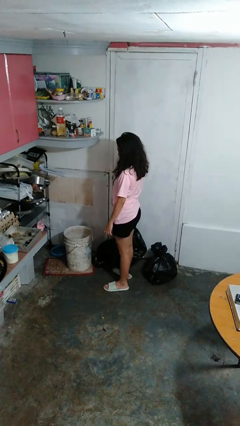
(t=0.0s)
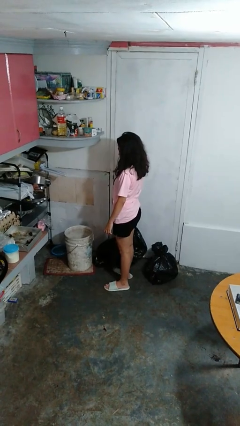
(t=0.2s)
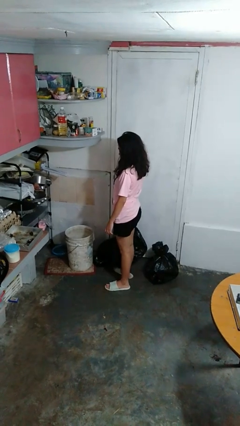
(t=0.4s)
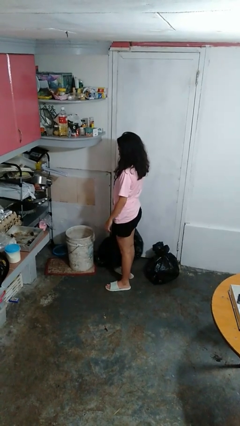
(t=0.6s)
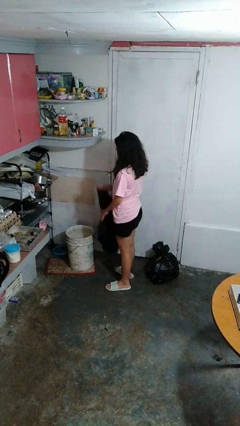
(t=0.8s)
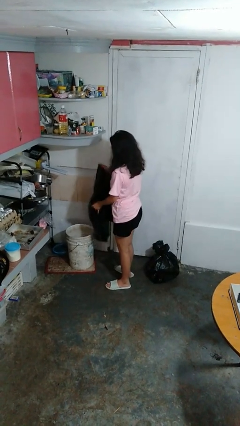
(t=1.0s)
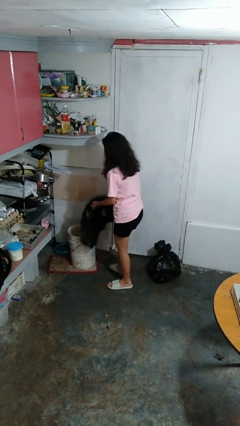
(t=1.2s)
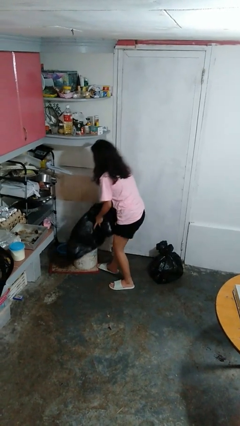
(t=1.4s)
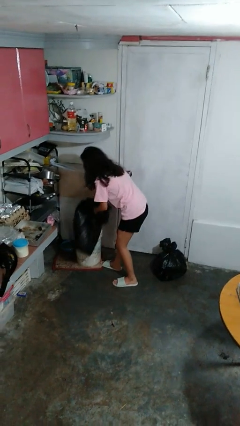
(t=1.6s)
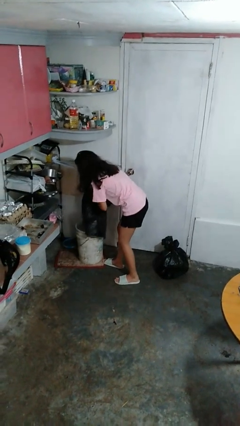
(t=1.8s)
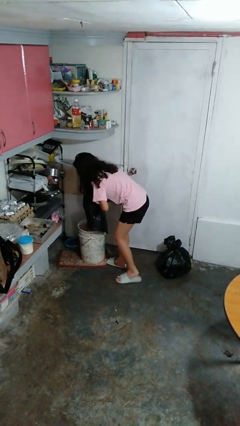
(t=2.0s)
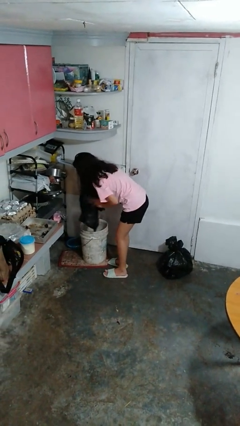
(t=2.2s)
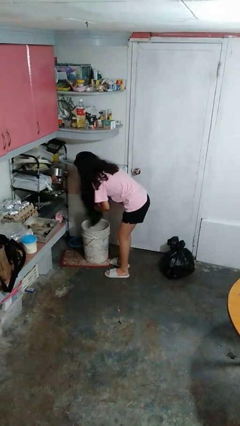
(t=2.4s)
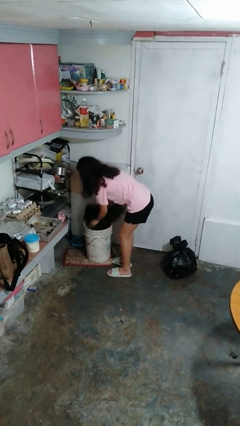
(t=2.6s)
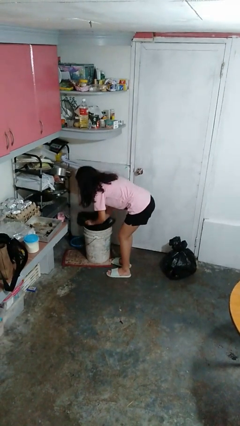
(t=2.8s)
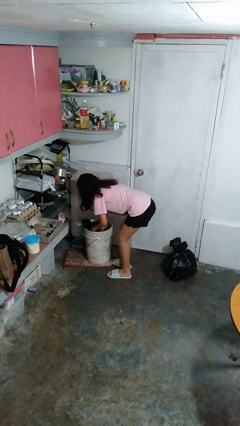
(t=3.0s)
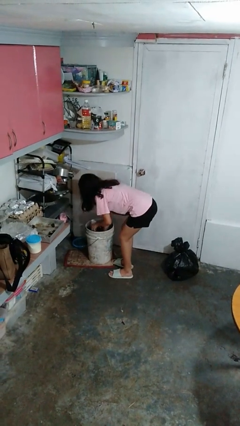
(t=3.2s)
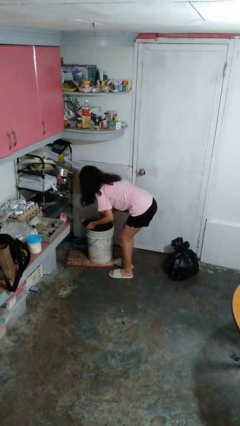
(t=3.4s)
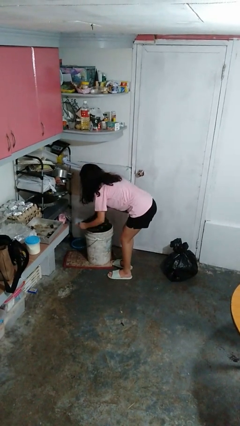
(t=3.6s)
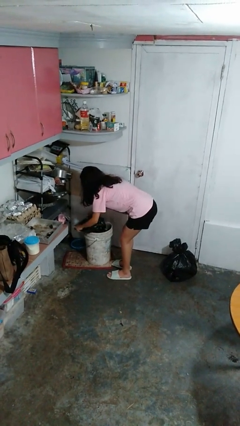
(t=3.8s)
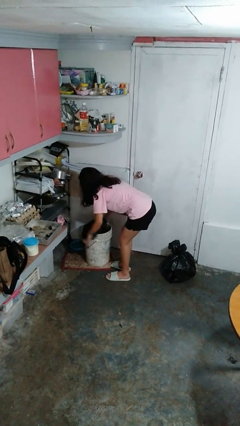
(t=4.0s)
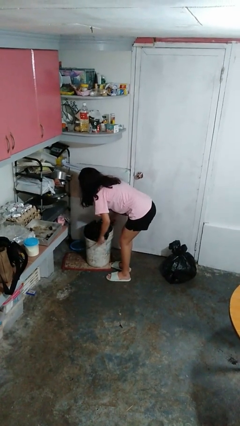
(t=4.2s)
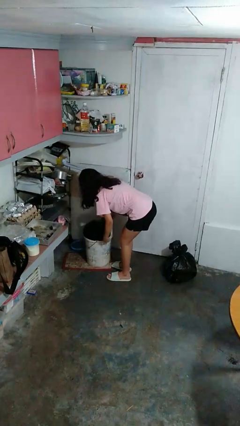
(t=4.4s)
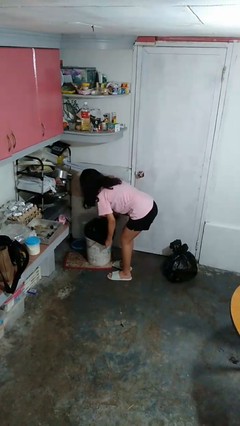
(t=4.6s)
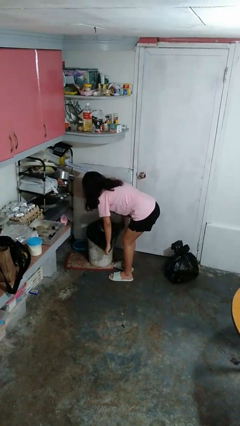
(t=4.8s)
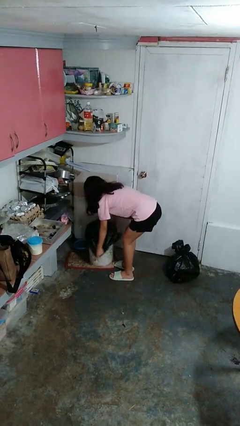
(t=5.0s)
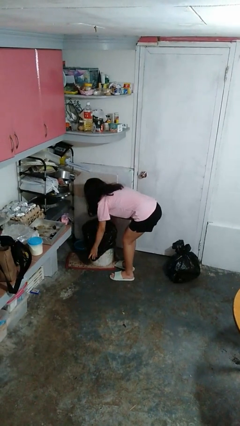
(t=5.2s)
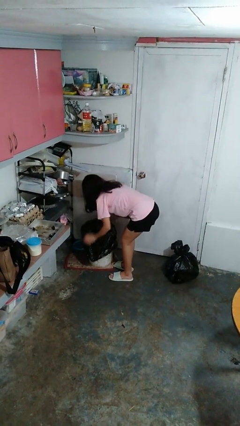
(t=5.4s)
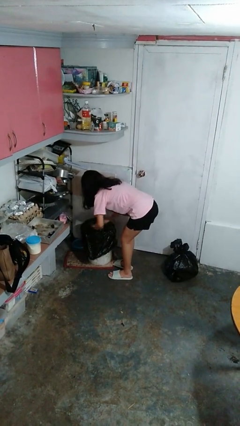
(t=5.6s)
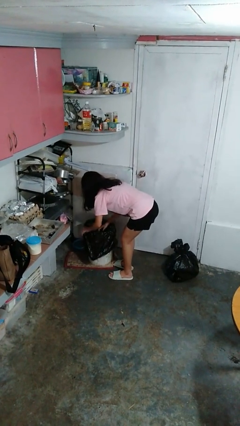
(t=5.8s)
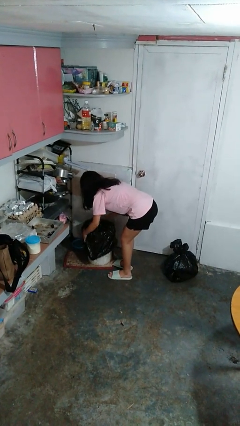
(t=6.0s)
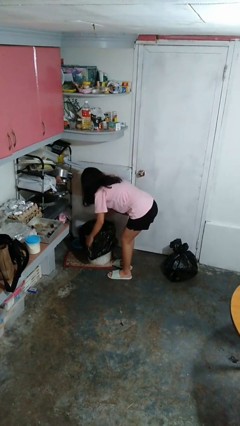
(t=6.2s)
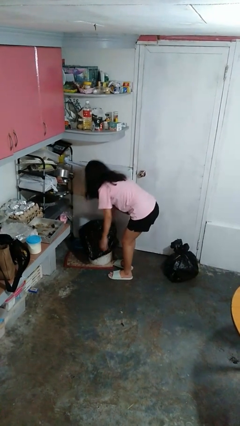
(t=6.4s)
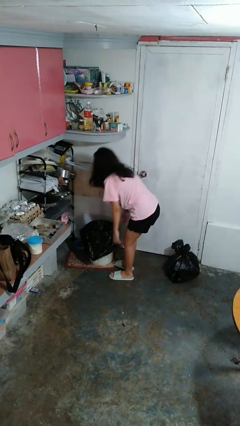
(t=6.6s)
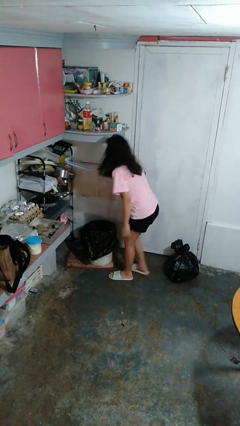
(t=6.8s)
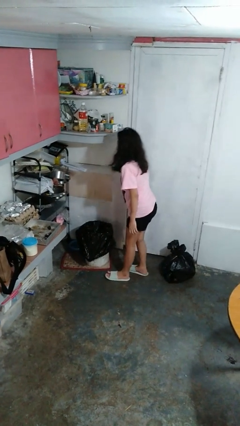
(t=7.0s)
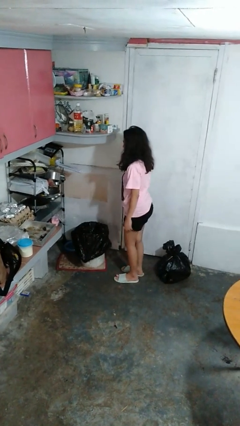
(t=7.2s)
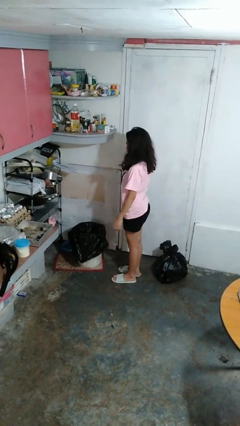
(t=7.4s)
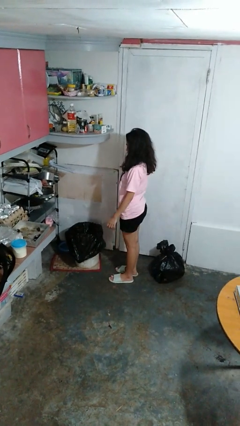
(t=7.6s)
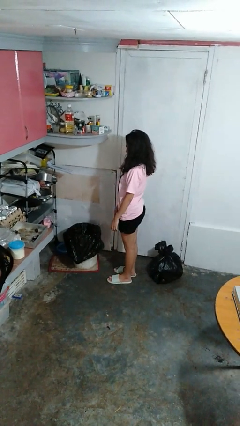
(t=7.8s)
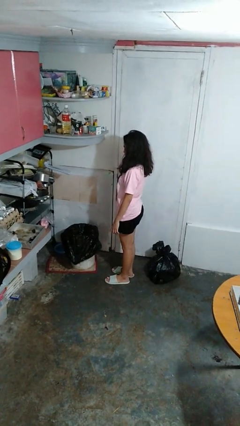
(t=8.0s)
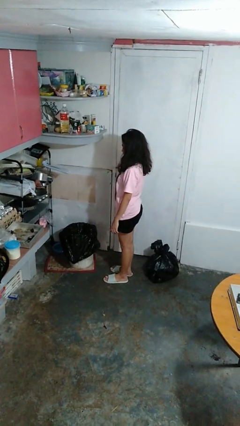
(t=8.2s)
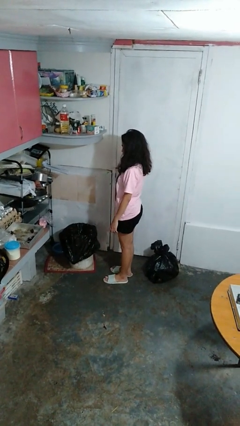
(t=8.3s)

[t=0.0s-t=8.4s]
person inserts trashbag into trashcan

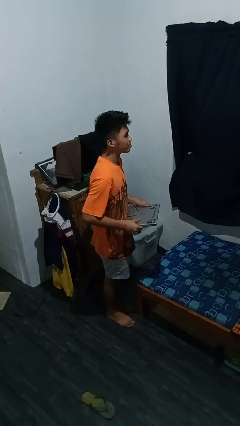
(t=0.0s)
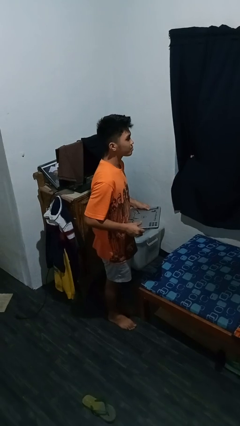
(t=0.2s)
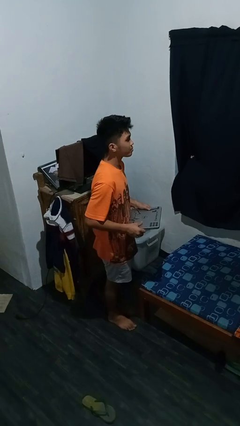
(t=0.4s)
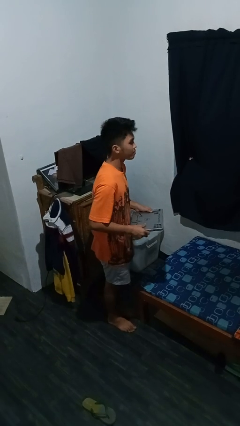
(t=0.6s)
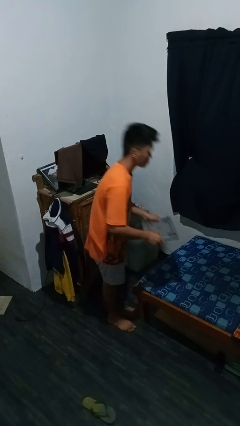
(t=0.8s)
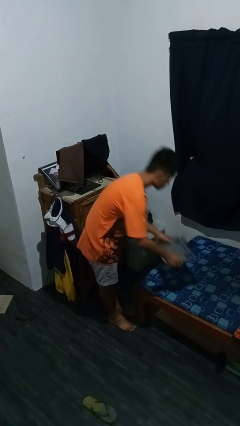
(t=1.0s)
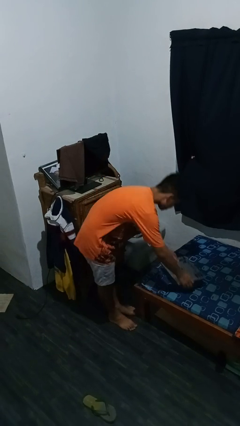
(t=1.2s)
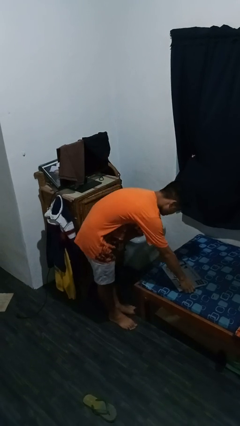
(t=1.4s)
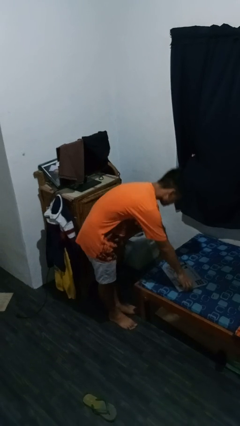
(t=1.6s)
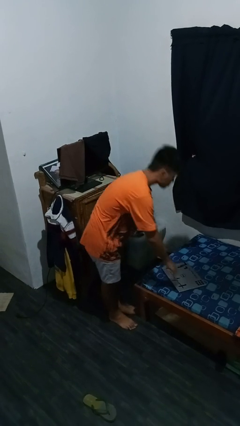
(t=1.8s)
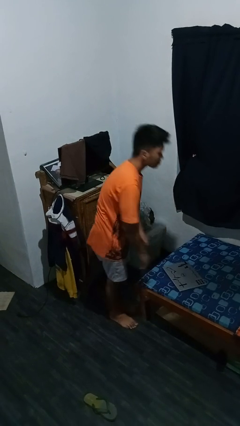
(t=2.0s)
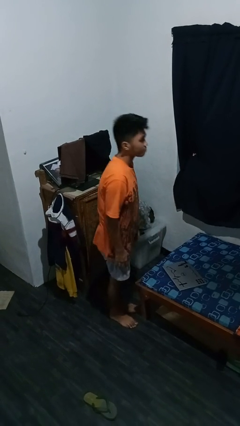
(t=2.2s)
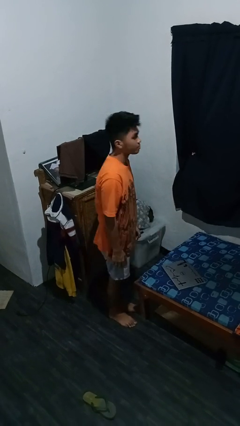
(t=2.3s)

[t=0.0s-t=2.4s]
person puts down object on bed

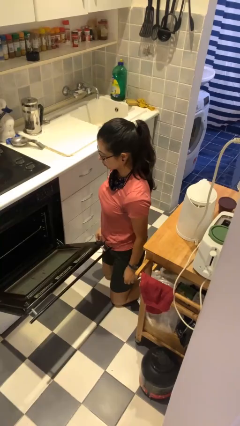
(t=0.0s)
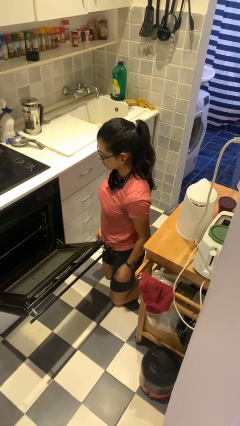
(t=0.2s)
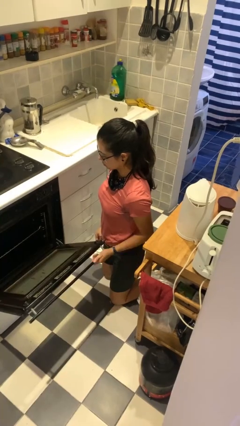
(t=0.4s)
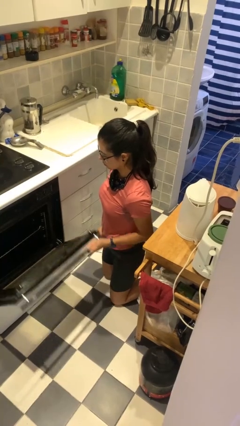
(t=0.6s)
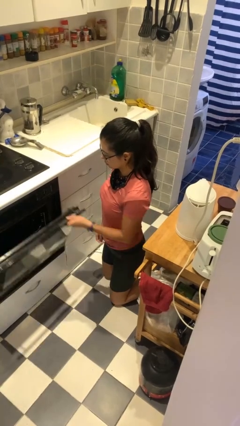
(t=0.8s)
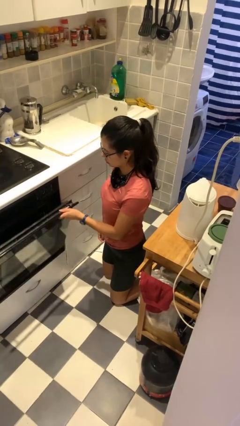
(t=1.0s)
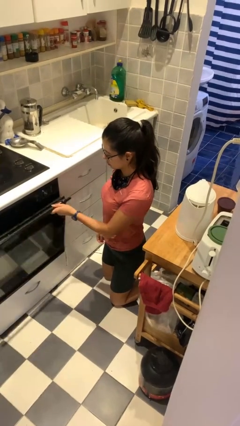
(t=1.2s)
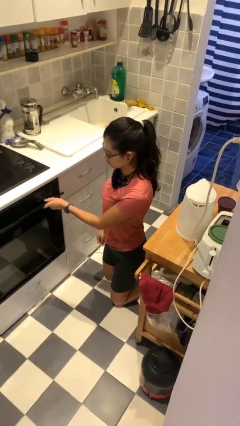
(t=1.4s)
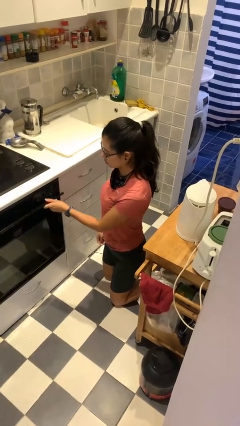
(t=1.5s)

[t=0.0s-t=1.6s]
person closes oven door

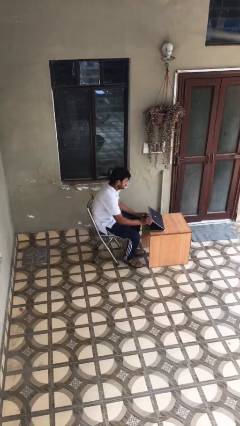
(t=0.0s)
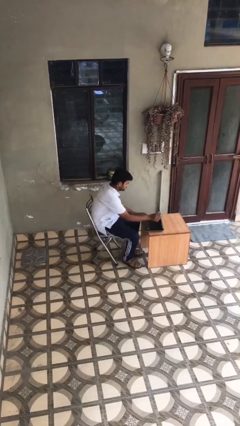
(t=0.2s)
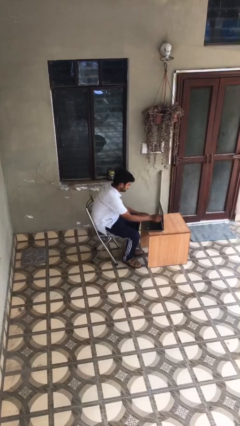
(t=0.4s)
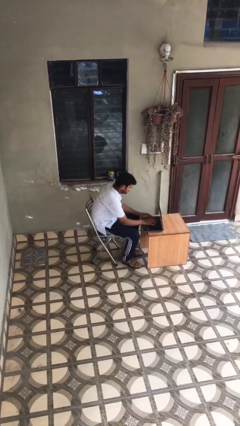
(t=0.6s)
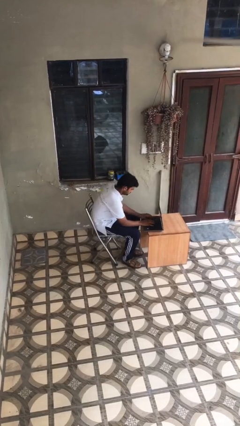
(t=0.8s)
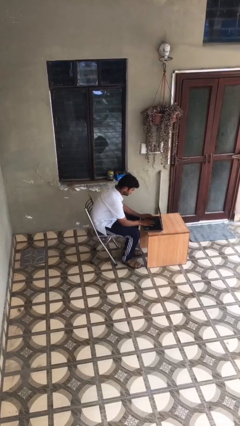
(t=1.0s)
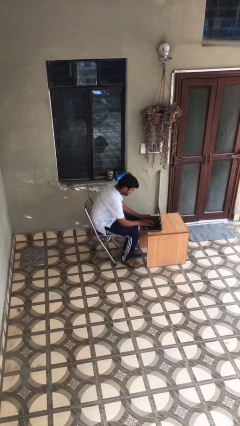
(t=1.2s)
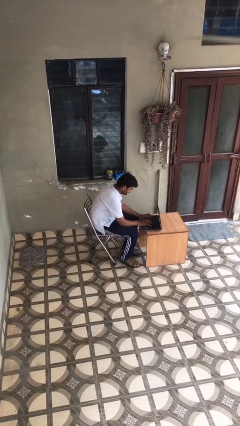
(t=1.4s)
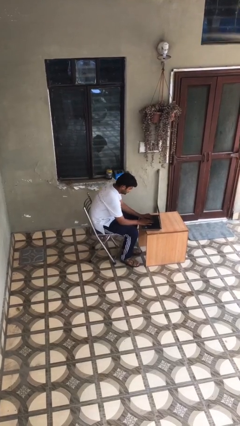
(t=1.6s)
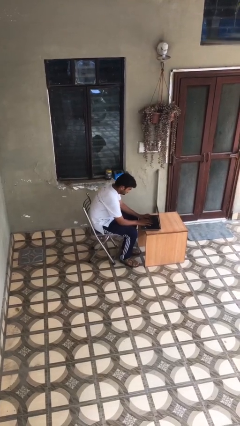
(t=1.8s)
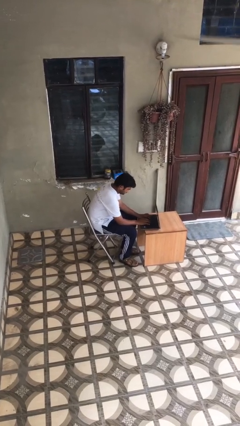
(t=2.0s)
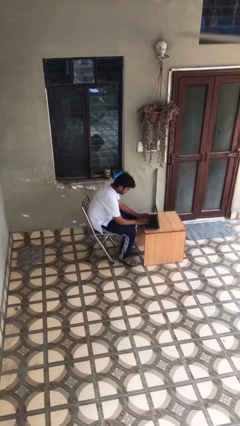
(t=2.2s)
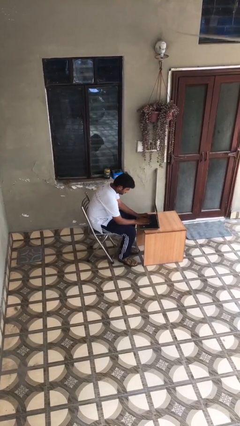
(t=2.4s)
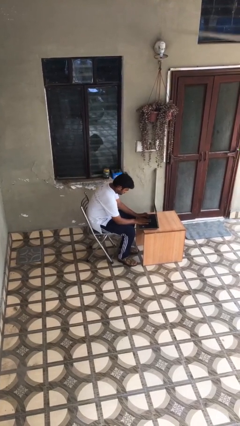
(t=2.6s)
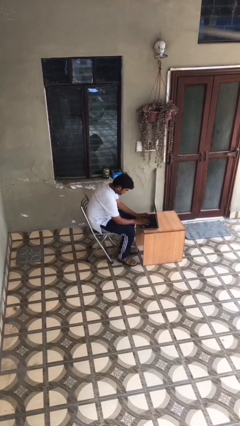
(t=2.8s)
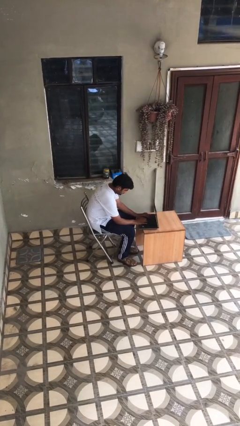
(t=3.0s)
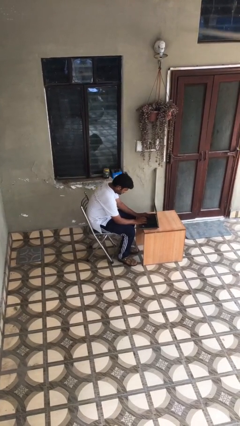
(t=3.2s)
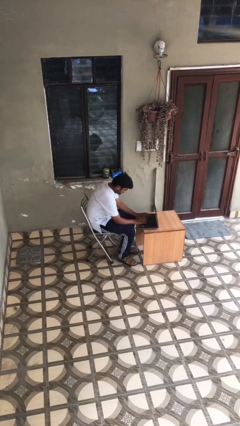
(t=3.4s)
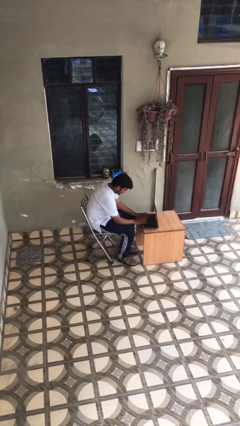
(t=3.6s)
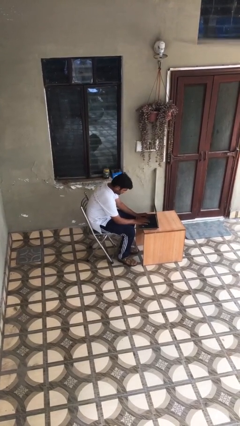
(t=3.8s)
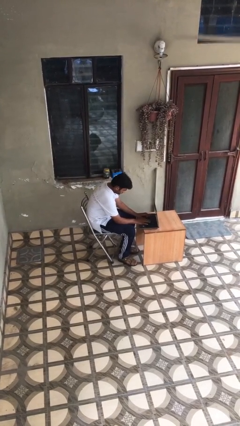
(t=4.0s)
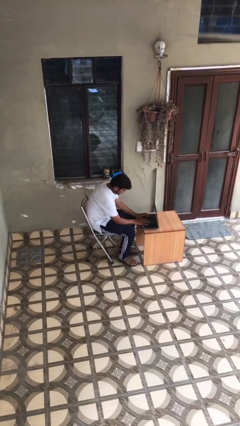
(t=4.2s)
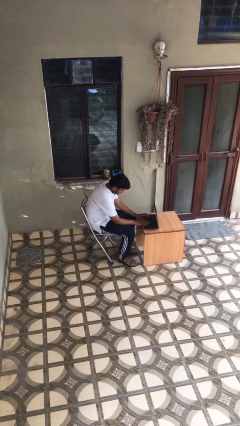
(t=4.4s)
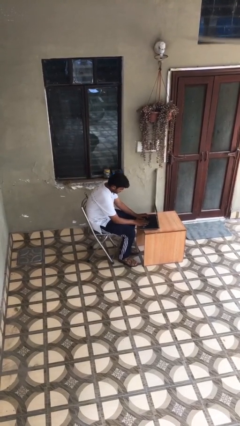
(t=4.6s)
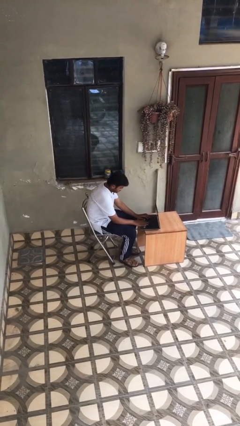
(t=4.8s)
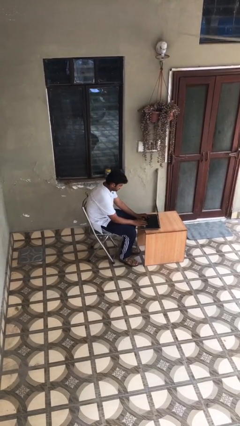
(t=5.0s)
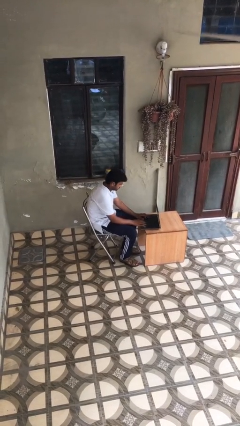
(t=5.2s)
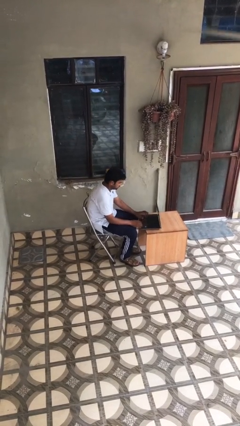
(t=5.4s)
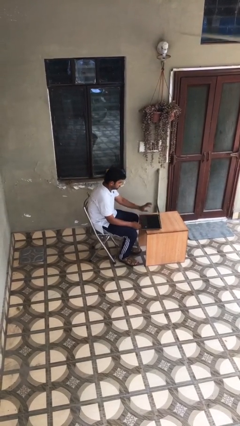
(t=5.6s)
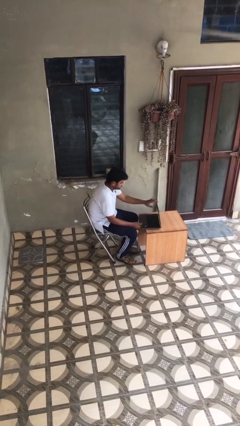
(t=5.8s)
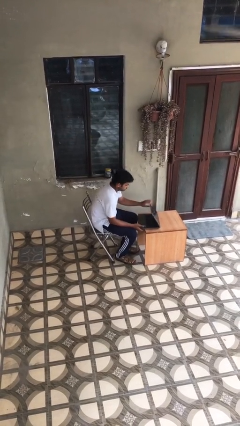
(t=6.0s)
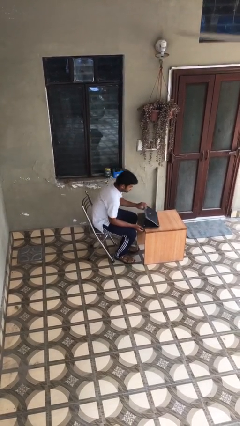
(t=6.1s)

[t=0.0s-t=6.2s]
person interacts with laptop
